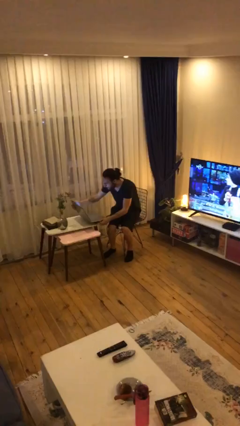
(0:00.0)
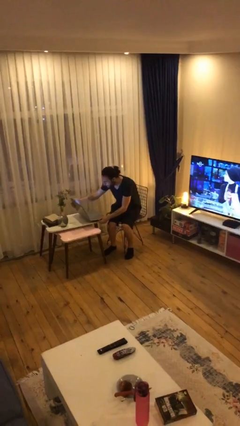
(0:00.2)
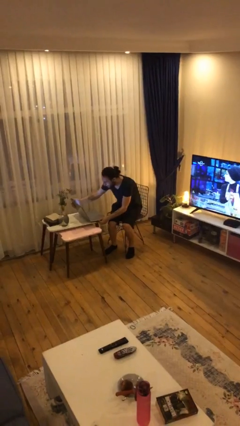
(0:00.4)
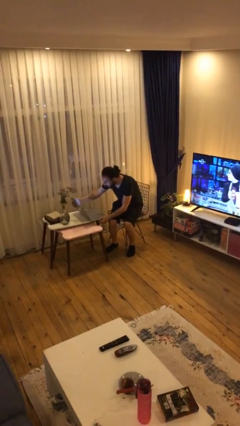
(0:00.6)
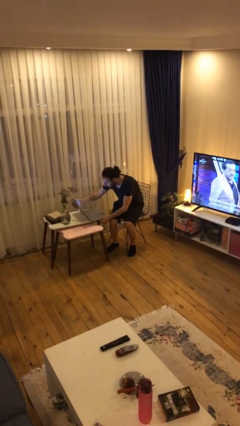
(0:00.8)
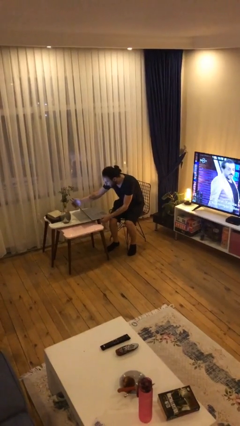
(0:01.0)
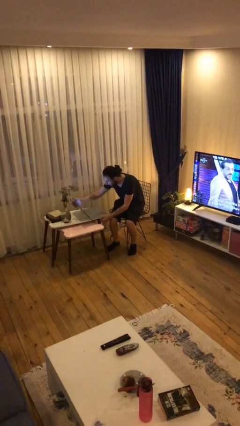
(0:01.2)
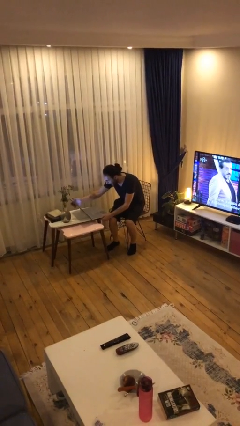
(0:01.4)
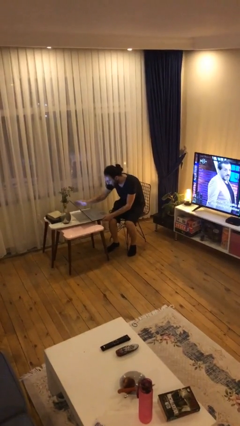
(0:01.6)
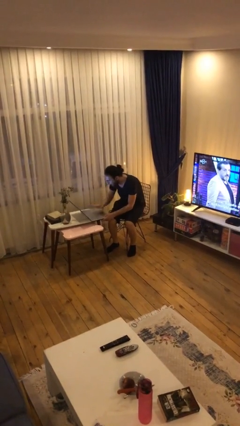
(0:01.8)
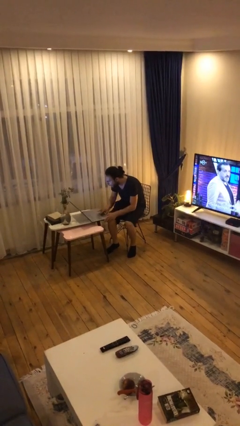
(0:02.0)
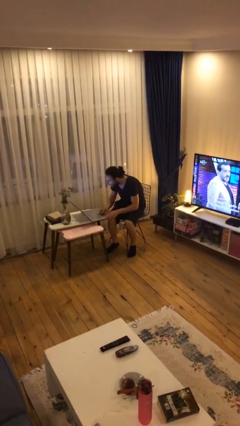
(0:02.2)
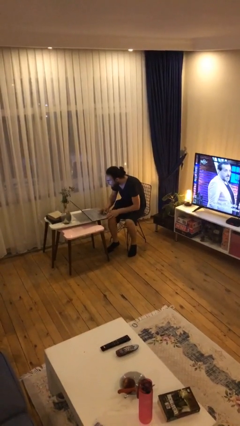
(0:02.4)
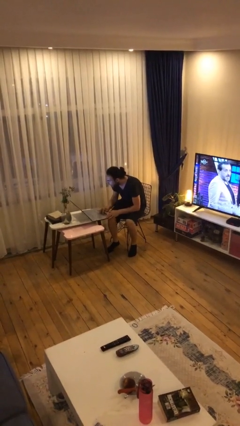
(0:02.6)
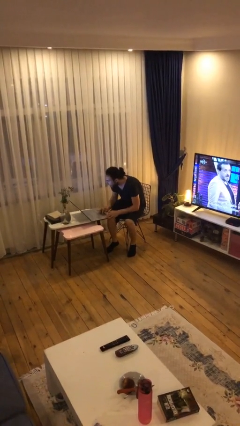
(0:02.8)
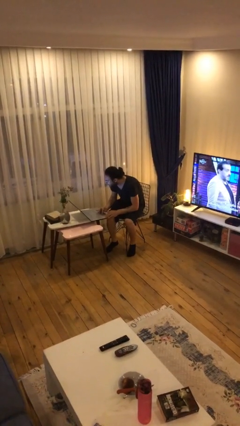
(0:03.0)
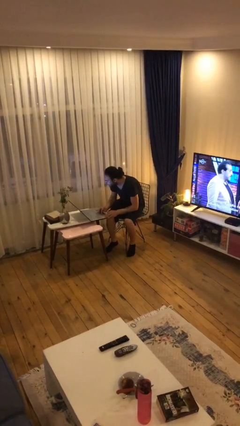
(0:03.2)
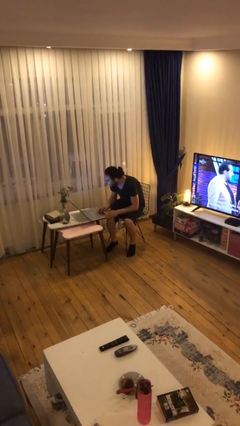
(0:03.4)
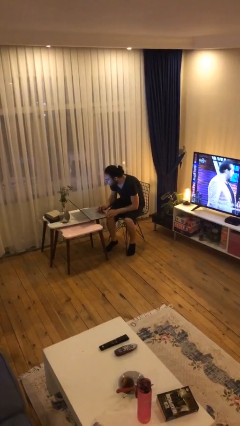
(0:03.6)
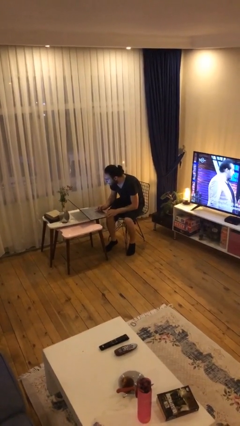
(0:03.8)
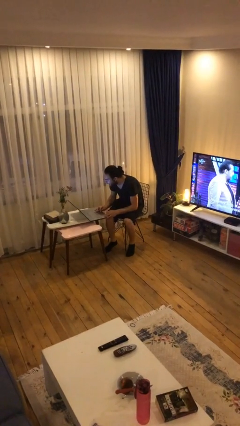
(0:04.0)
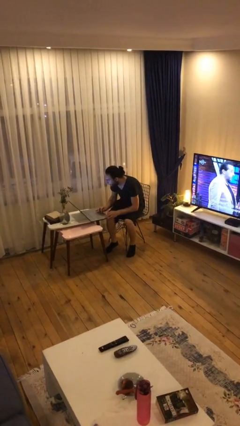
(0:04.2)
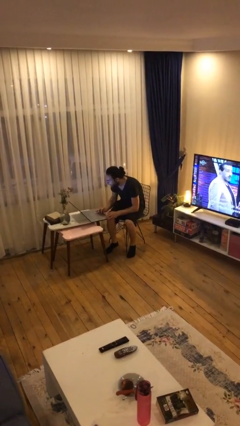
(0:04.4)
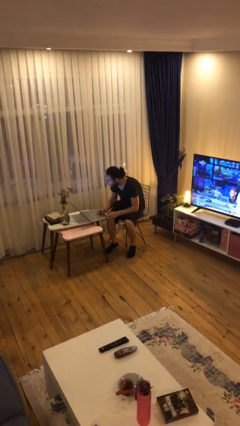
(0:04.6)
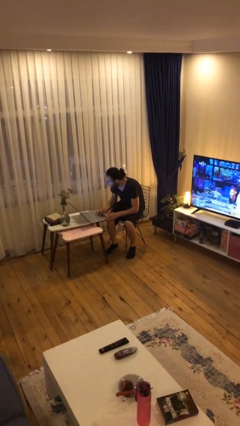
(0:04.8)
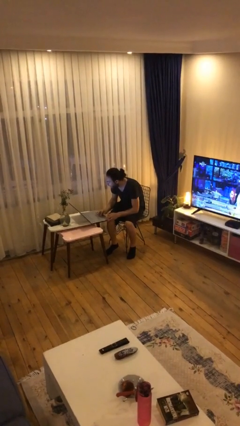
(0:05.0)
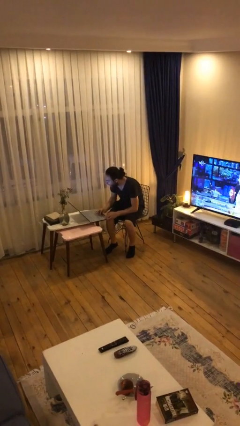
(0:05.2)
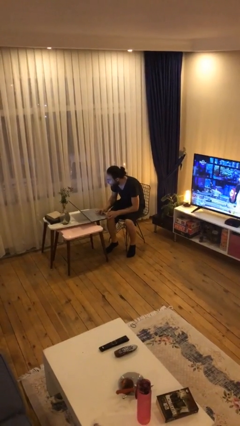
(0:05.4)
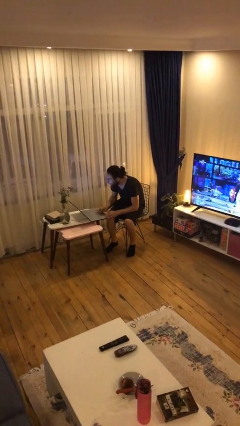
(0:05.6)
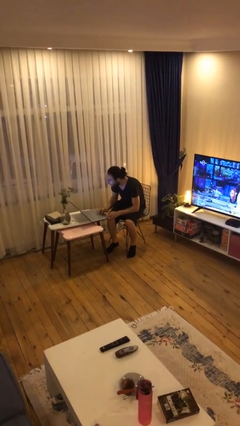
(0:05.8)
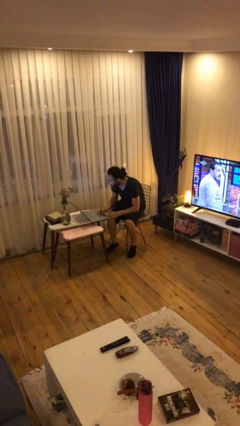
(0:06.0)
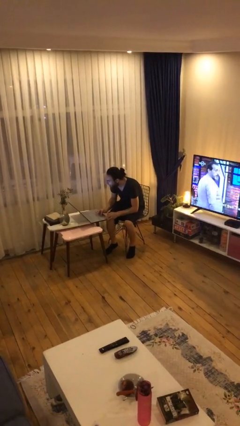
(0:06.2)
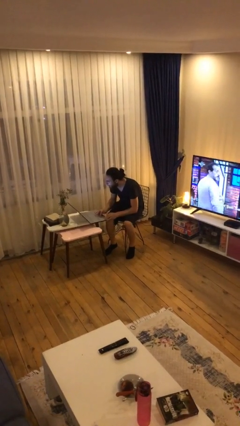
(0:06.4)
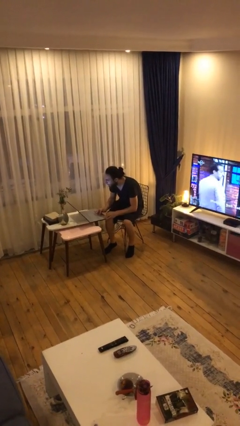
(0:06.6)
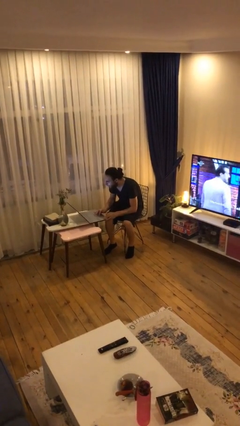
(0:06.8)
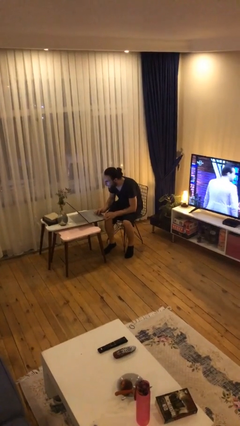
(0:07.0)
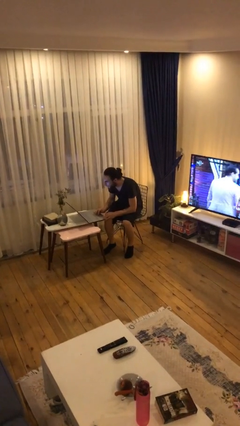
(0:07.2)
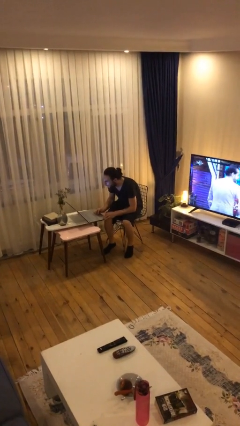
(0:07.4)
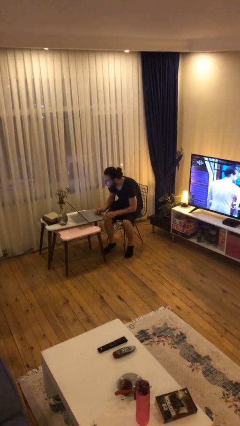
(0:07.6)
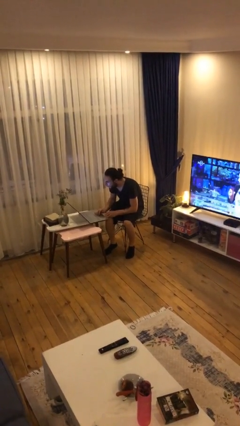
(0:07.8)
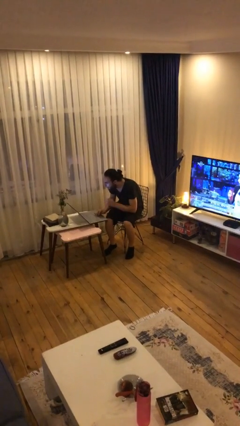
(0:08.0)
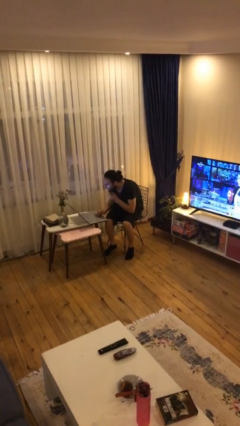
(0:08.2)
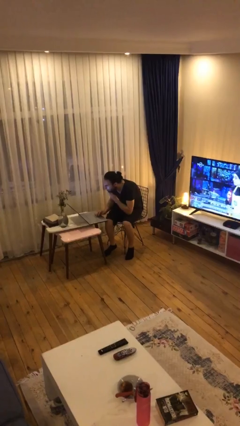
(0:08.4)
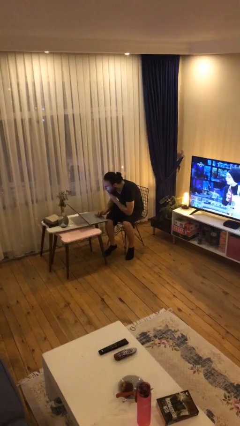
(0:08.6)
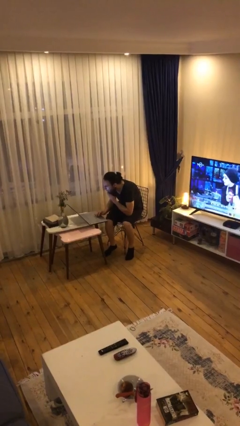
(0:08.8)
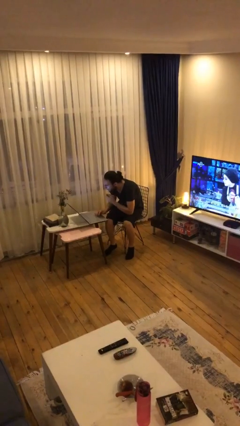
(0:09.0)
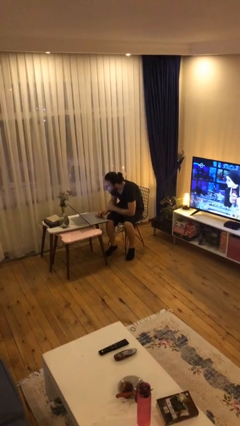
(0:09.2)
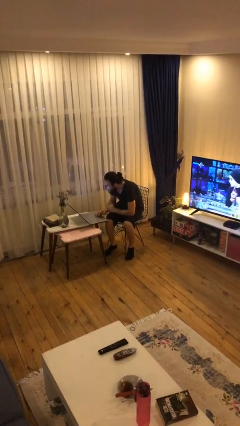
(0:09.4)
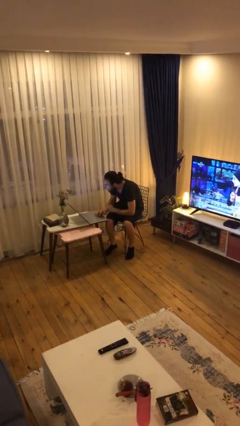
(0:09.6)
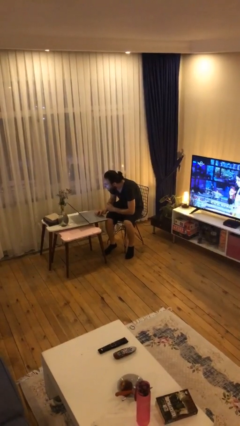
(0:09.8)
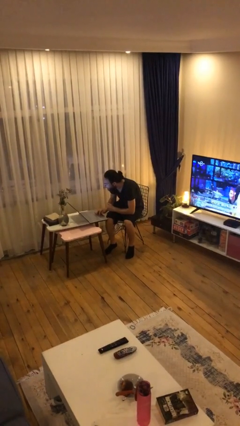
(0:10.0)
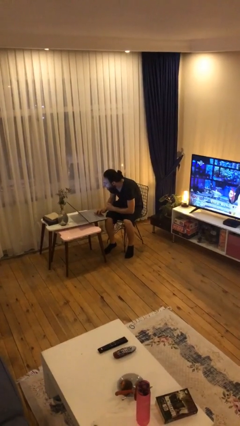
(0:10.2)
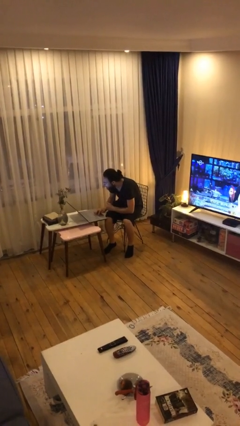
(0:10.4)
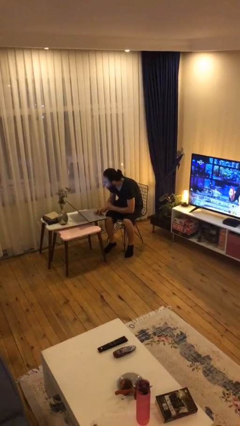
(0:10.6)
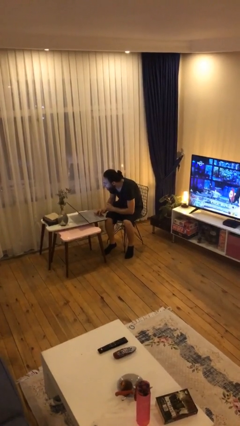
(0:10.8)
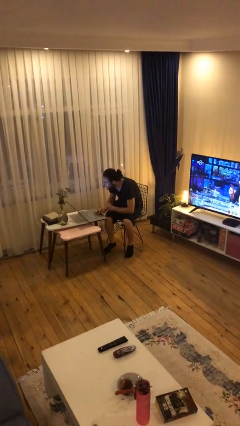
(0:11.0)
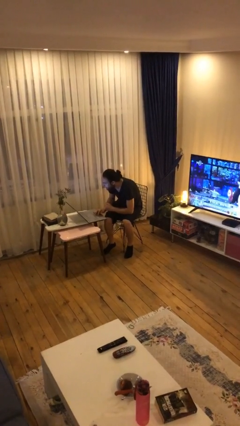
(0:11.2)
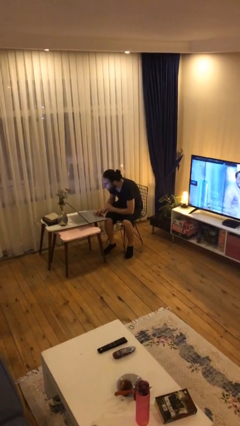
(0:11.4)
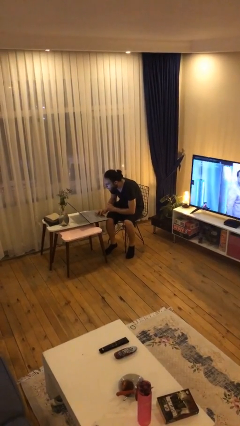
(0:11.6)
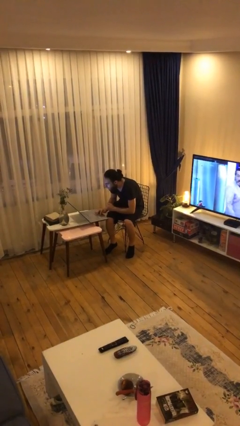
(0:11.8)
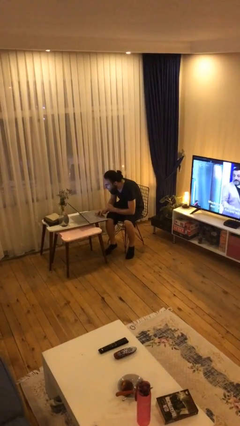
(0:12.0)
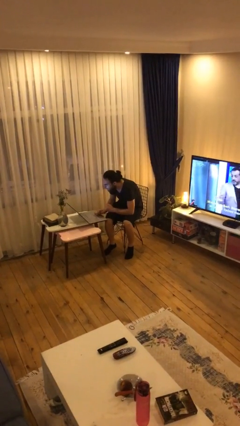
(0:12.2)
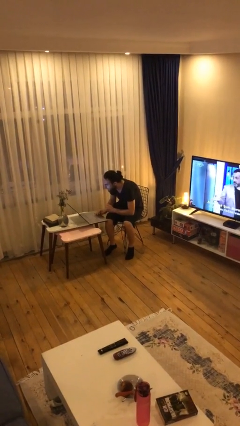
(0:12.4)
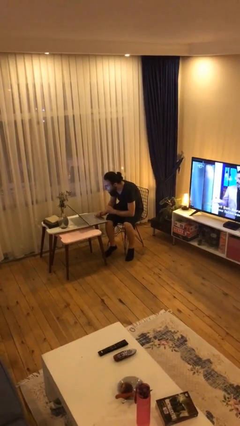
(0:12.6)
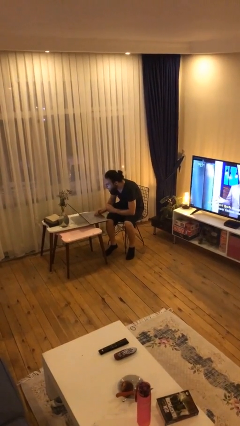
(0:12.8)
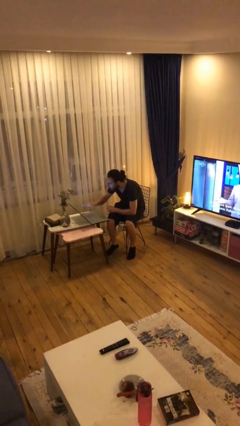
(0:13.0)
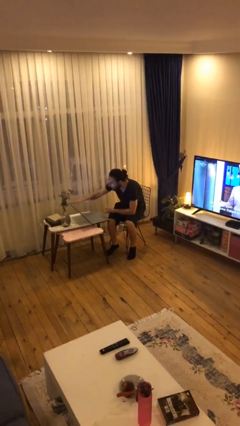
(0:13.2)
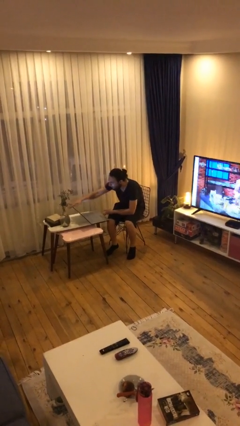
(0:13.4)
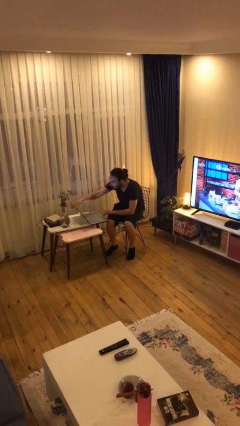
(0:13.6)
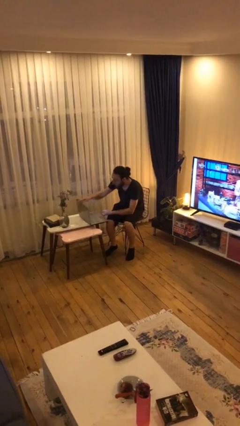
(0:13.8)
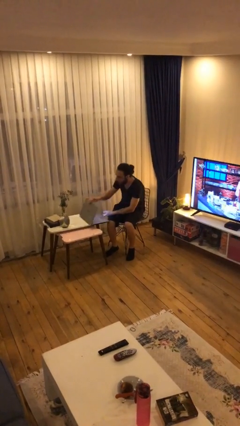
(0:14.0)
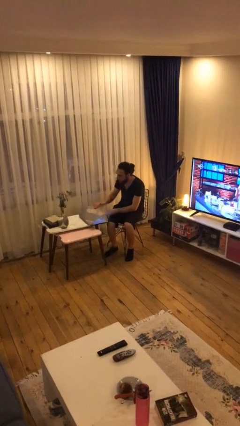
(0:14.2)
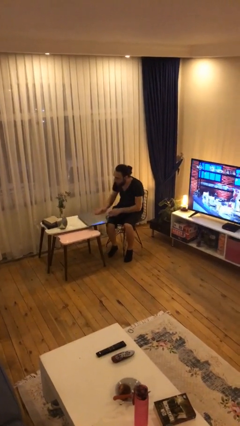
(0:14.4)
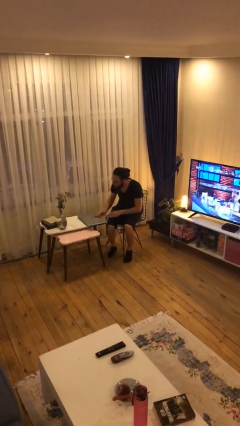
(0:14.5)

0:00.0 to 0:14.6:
person interacts with laptop

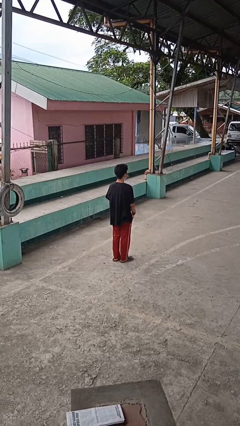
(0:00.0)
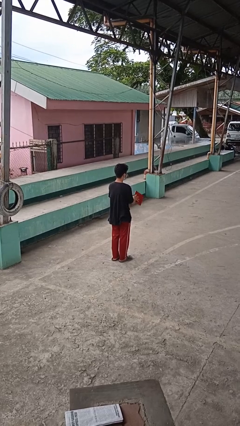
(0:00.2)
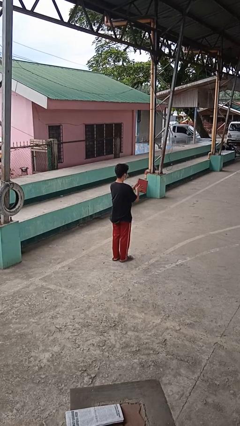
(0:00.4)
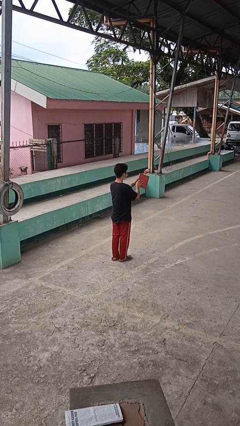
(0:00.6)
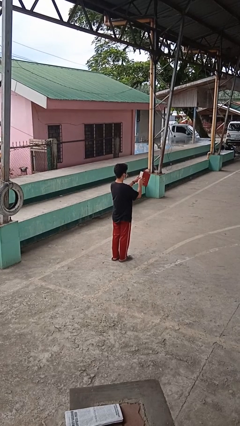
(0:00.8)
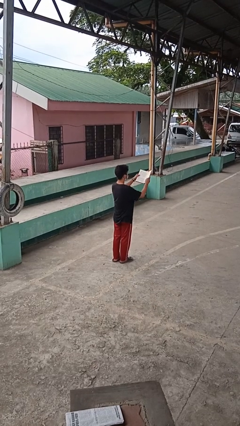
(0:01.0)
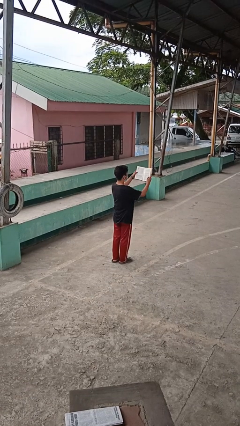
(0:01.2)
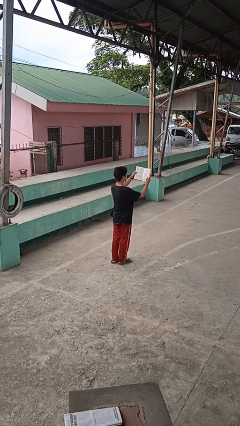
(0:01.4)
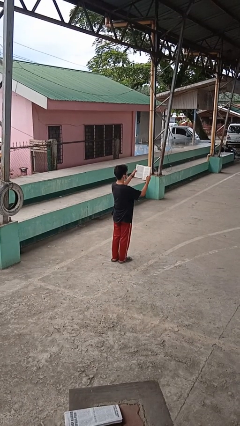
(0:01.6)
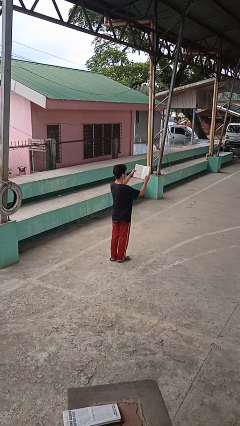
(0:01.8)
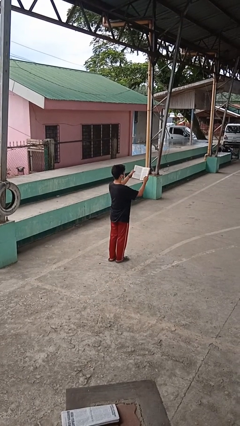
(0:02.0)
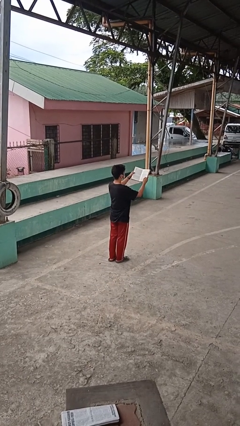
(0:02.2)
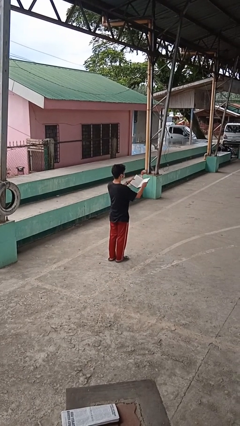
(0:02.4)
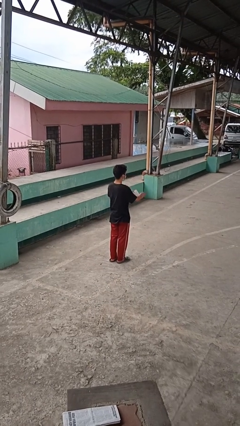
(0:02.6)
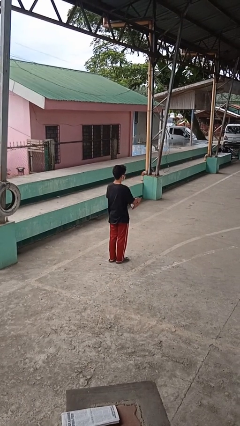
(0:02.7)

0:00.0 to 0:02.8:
person reads book

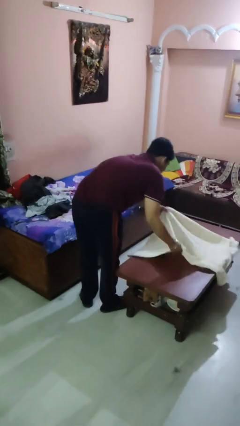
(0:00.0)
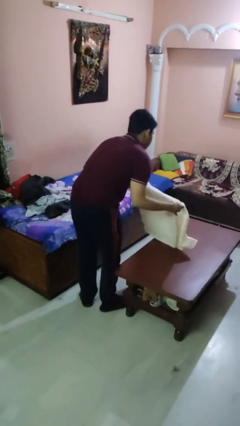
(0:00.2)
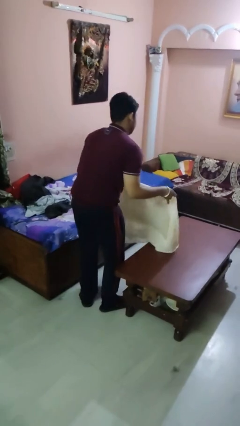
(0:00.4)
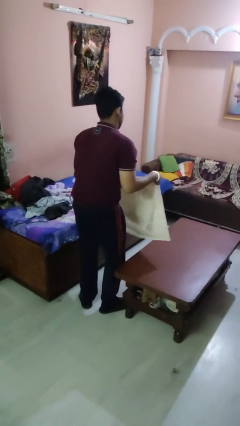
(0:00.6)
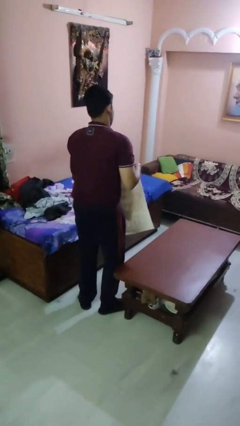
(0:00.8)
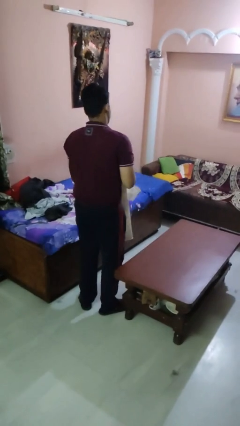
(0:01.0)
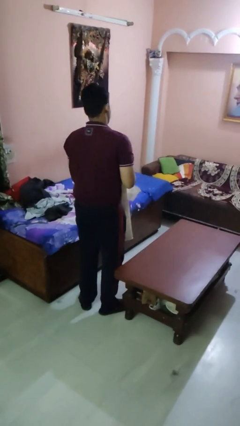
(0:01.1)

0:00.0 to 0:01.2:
person folds tablecloth
